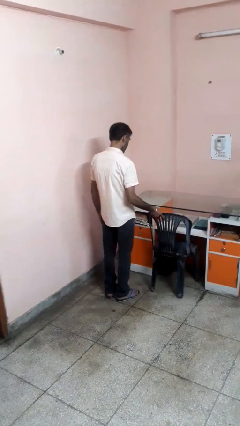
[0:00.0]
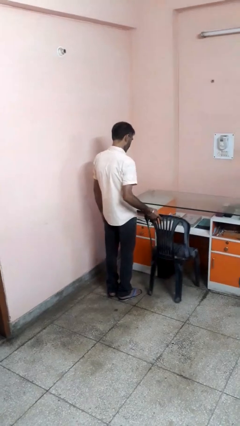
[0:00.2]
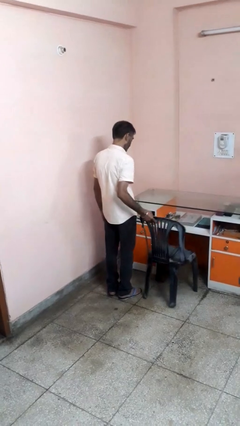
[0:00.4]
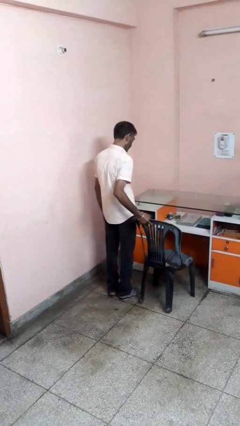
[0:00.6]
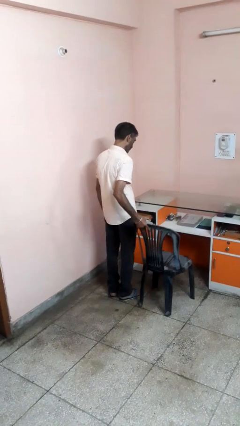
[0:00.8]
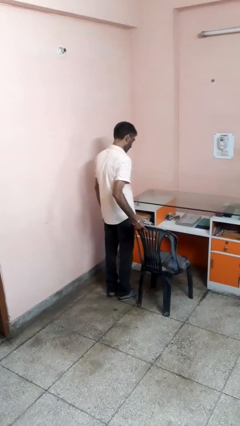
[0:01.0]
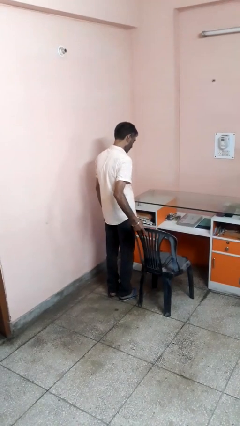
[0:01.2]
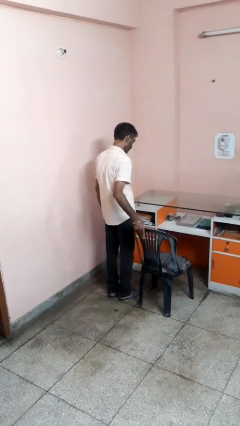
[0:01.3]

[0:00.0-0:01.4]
person pulls out chair

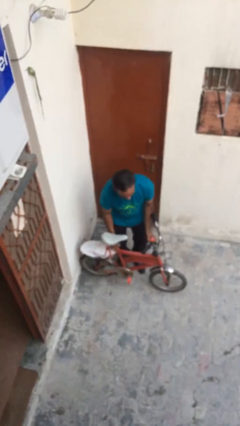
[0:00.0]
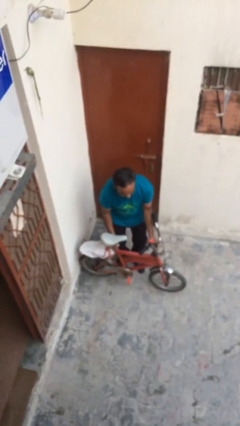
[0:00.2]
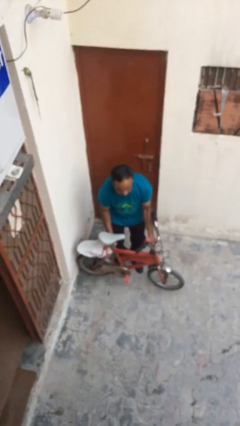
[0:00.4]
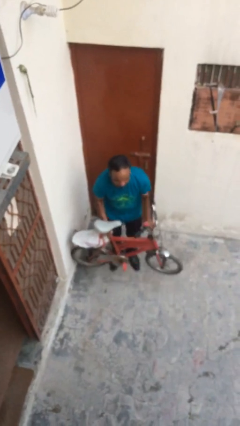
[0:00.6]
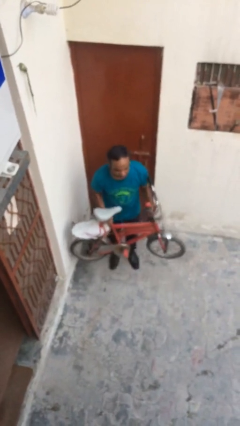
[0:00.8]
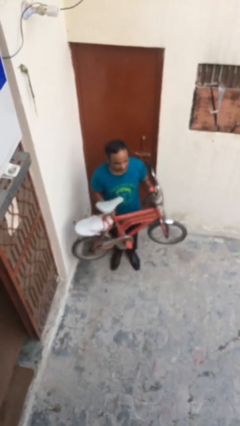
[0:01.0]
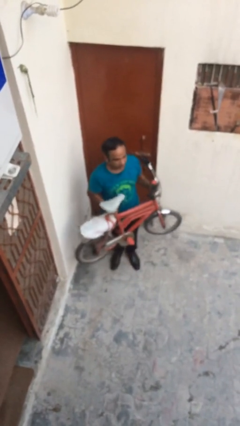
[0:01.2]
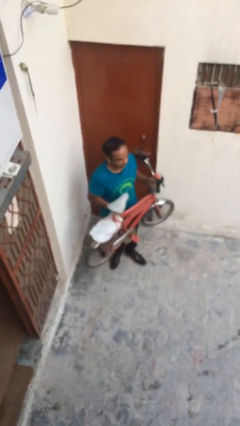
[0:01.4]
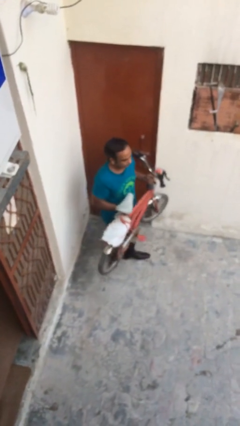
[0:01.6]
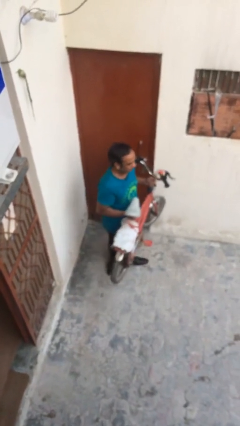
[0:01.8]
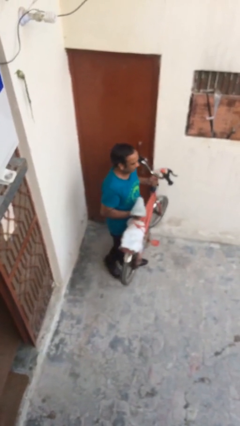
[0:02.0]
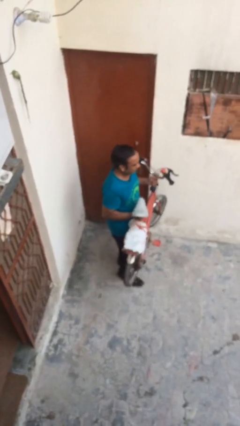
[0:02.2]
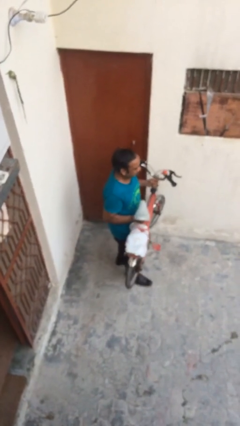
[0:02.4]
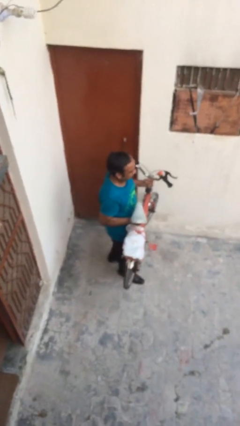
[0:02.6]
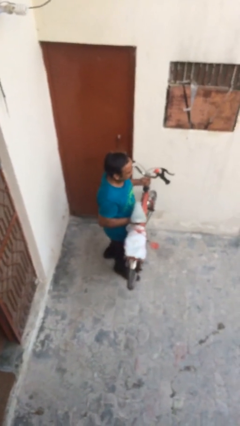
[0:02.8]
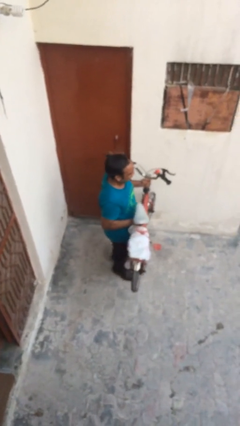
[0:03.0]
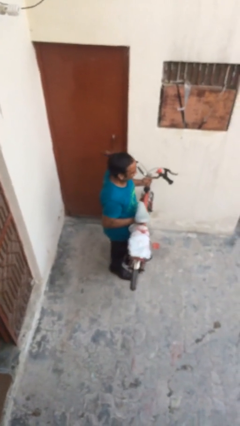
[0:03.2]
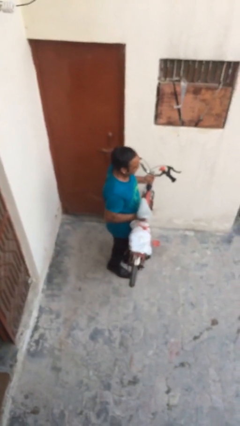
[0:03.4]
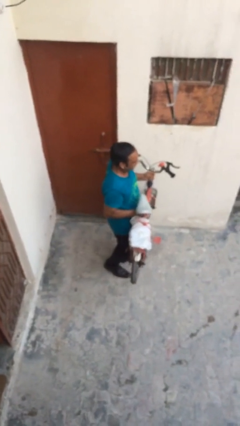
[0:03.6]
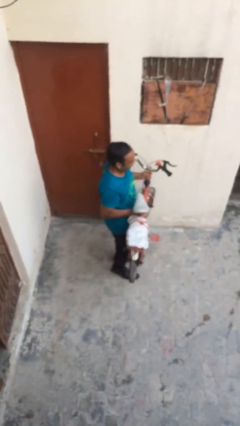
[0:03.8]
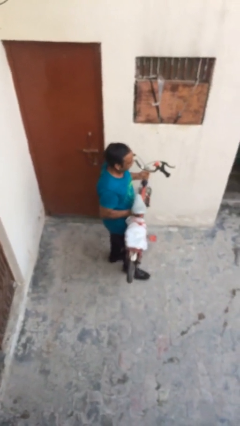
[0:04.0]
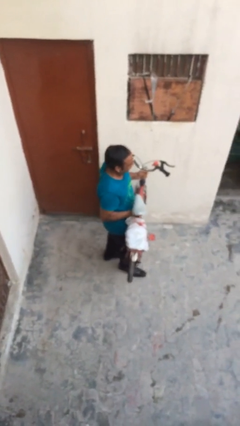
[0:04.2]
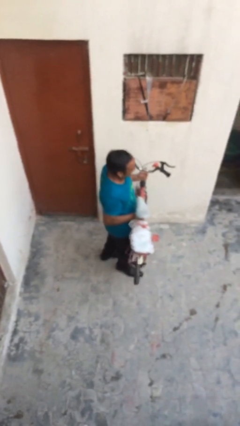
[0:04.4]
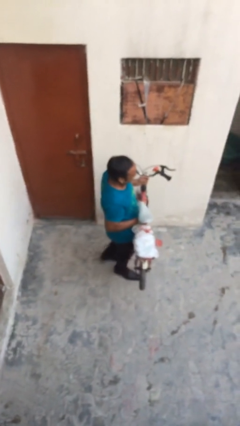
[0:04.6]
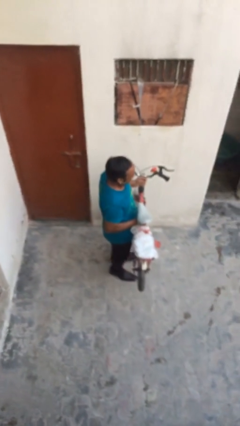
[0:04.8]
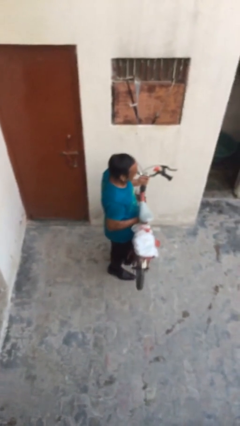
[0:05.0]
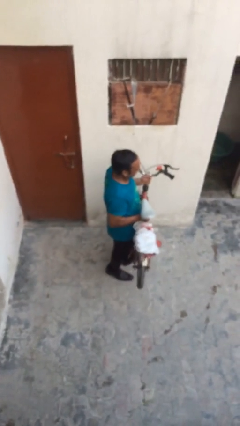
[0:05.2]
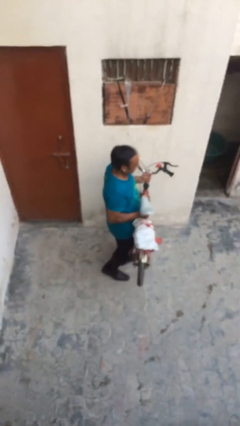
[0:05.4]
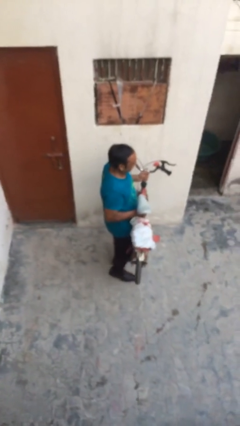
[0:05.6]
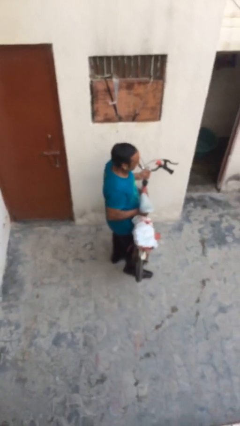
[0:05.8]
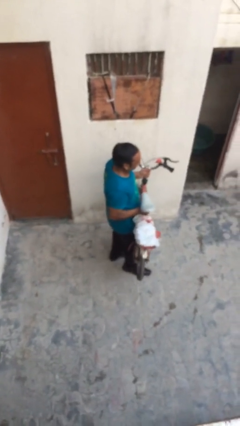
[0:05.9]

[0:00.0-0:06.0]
person carries heavy object

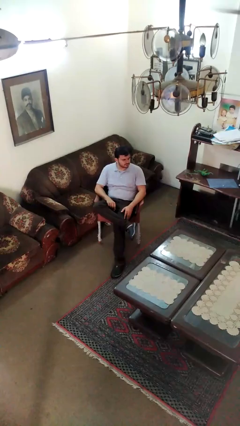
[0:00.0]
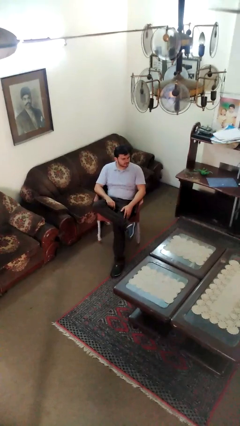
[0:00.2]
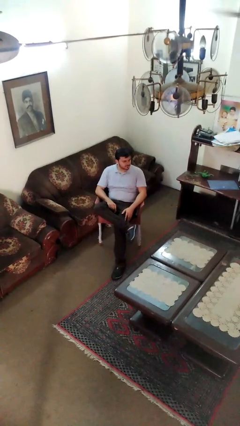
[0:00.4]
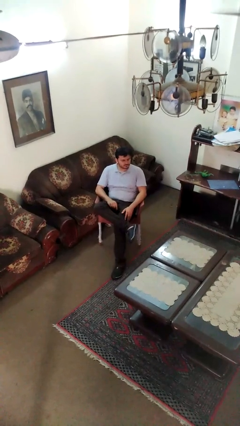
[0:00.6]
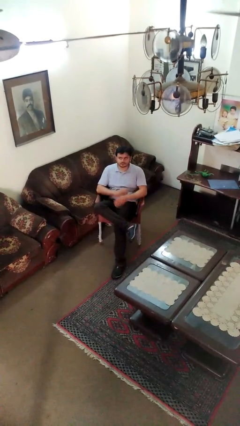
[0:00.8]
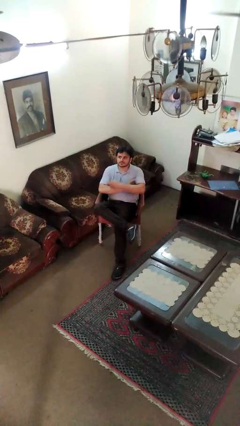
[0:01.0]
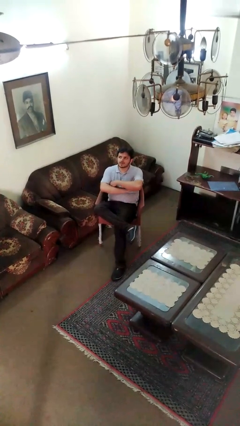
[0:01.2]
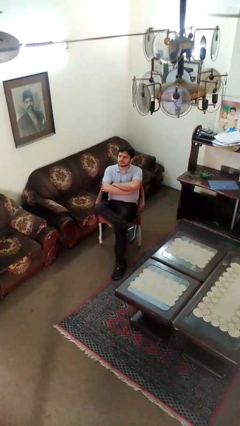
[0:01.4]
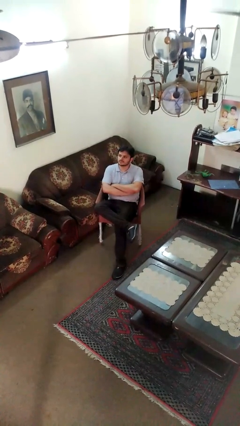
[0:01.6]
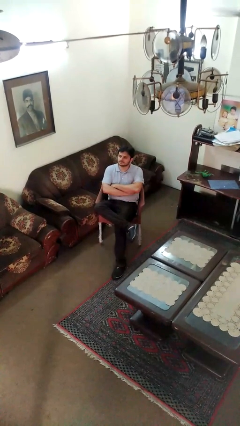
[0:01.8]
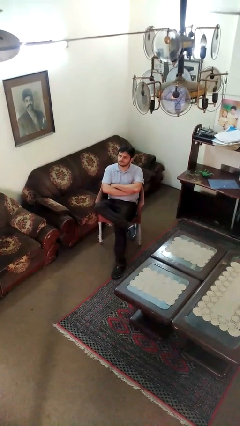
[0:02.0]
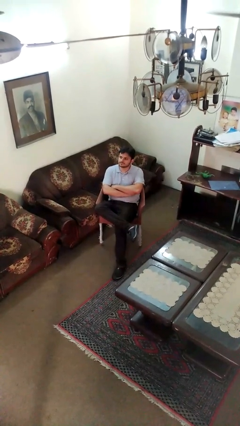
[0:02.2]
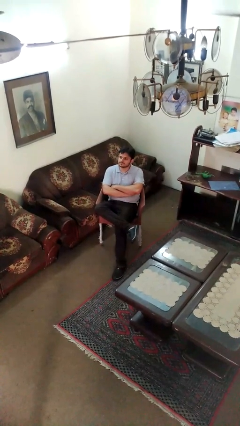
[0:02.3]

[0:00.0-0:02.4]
person crosses arms

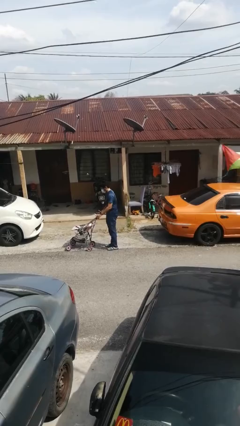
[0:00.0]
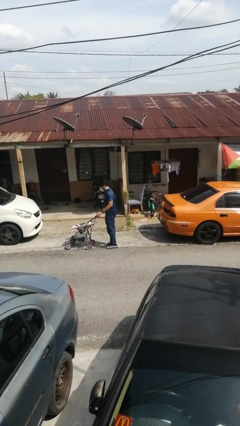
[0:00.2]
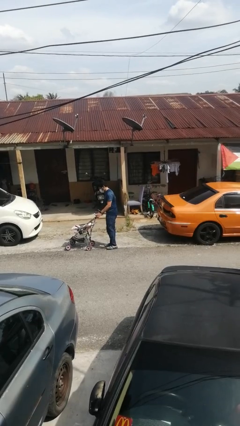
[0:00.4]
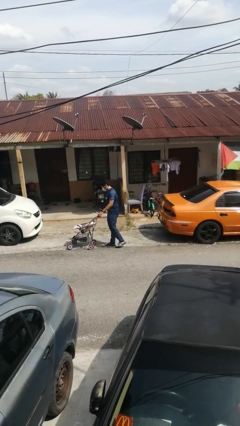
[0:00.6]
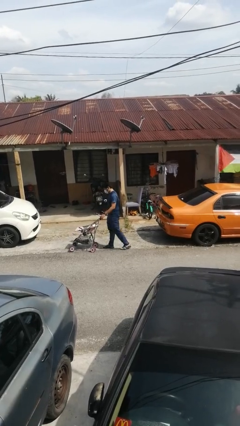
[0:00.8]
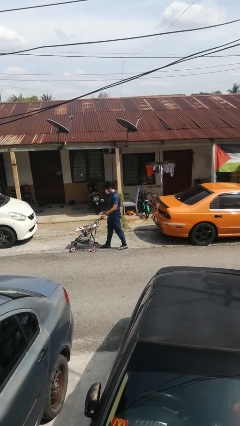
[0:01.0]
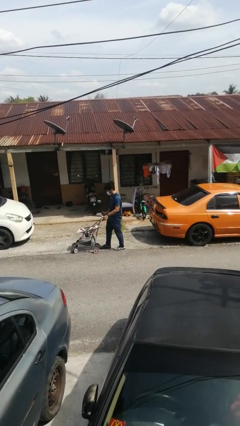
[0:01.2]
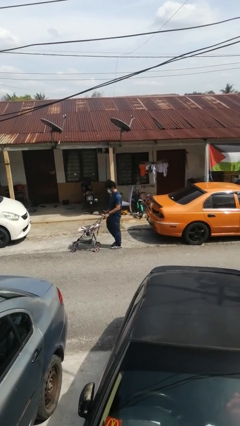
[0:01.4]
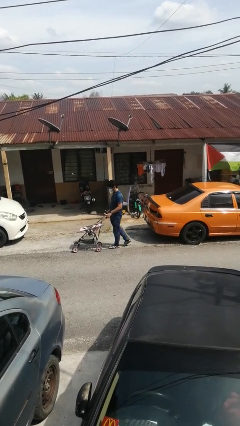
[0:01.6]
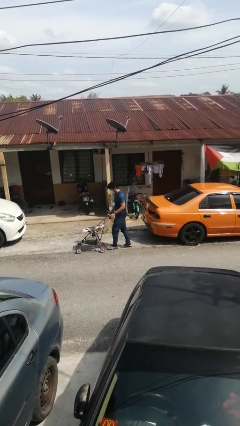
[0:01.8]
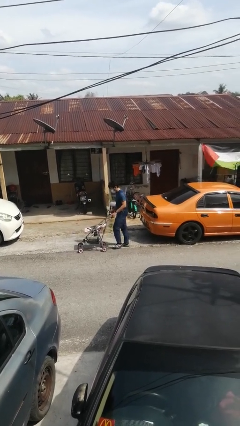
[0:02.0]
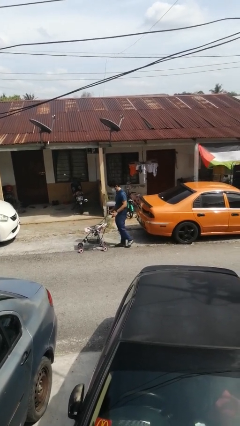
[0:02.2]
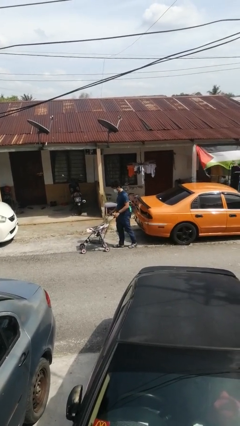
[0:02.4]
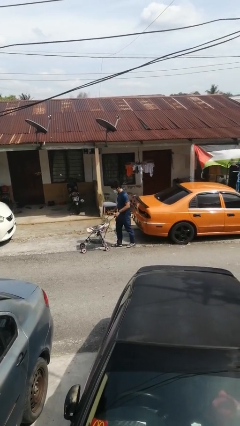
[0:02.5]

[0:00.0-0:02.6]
person pulls wheeled cart

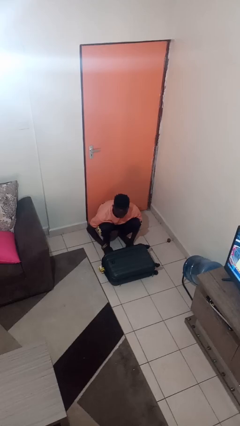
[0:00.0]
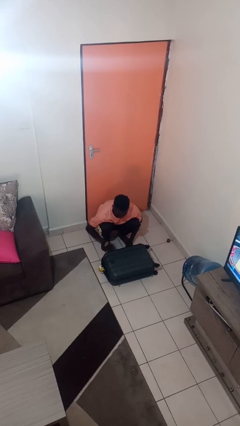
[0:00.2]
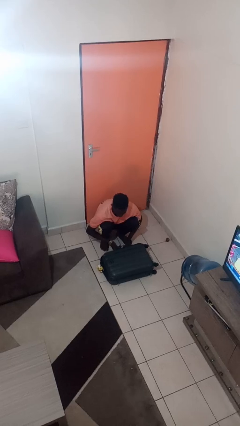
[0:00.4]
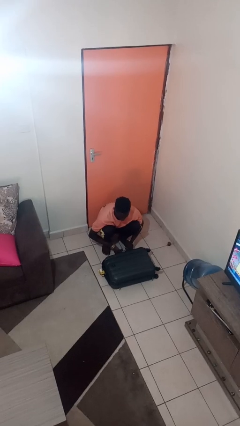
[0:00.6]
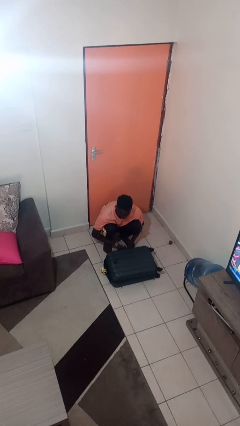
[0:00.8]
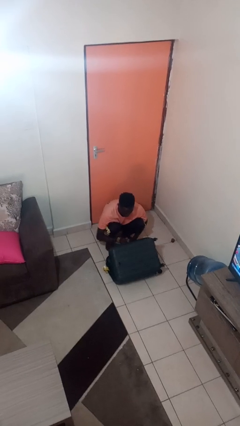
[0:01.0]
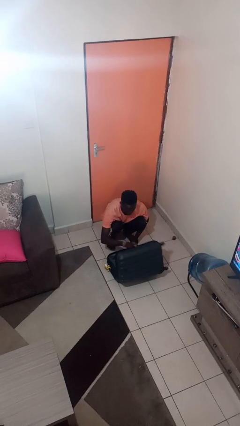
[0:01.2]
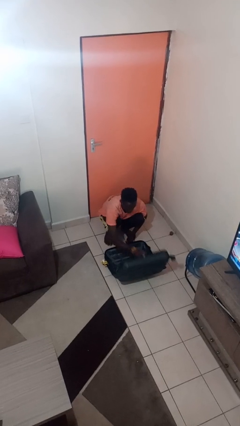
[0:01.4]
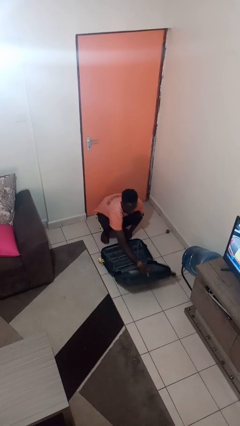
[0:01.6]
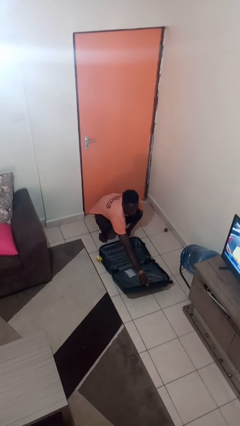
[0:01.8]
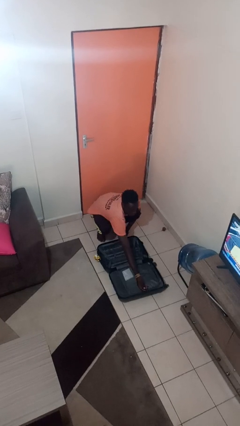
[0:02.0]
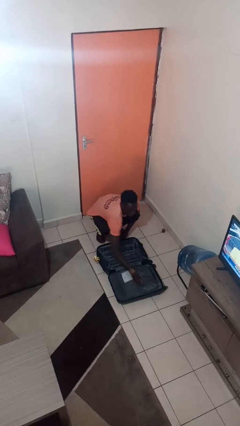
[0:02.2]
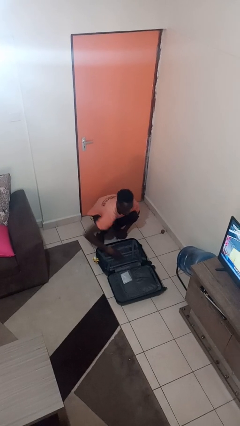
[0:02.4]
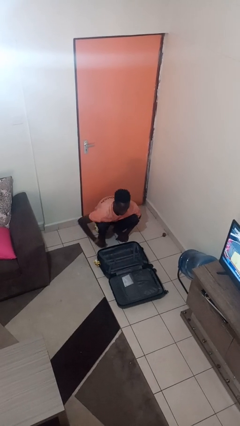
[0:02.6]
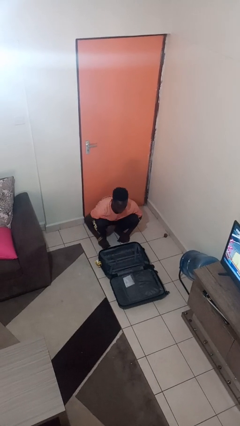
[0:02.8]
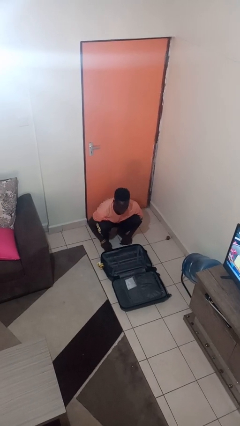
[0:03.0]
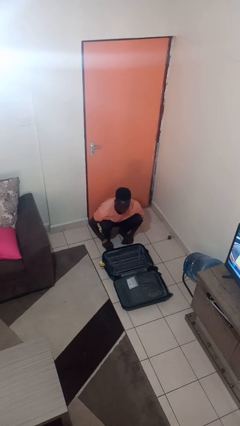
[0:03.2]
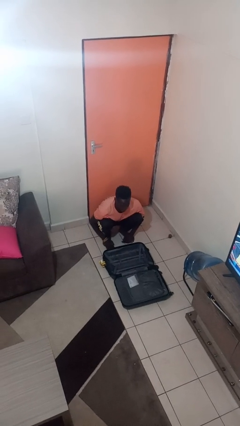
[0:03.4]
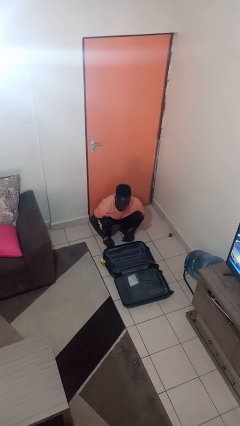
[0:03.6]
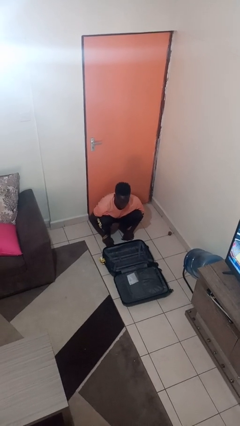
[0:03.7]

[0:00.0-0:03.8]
person opens suitcase

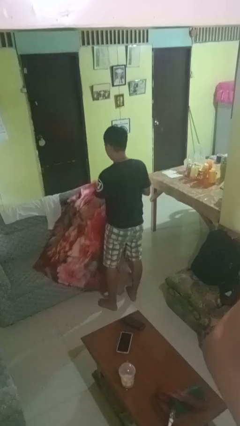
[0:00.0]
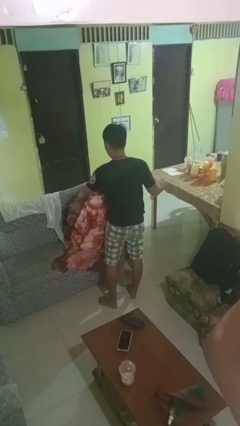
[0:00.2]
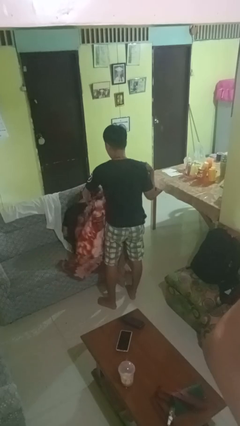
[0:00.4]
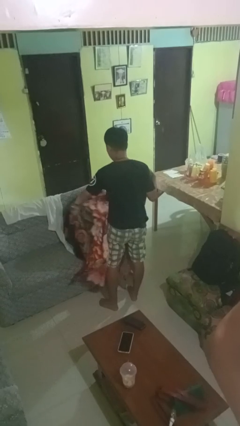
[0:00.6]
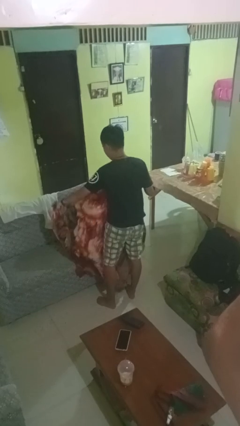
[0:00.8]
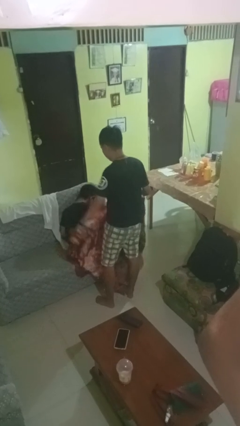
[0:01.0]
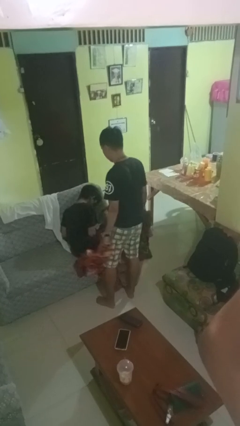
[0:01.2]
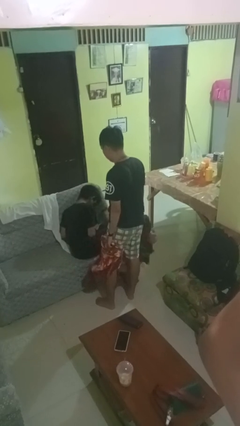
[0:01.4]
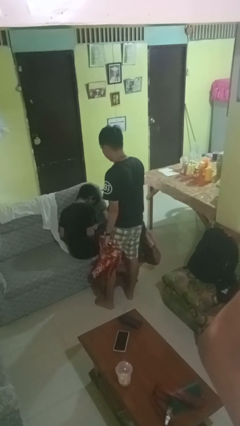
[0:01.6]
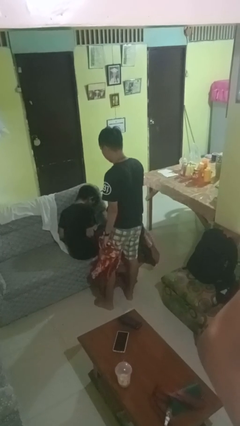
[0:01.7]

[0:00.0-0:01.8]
person uncovers friend with blanket
